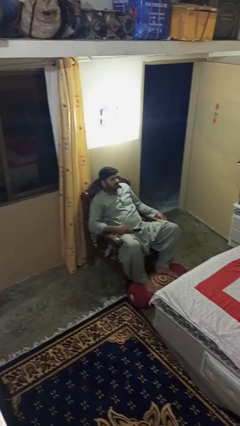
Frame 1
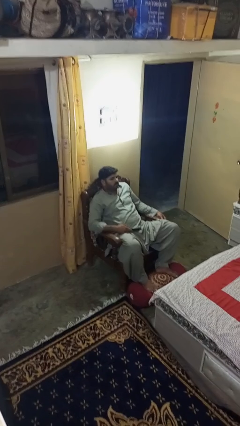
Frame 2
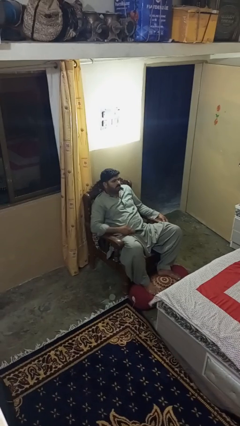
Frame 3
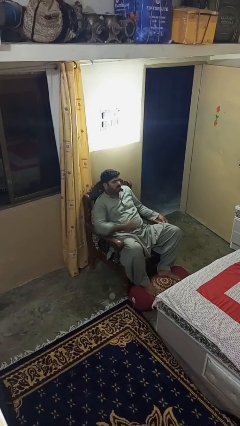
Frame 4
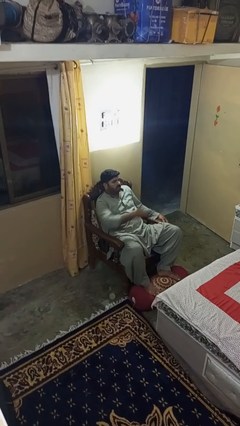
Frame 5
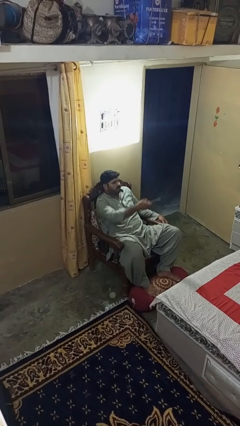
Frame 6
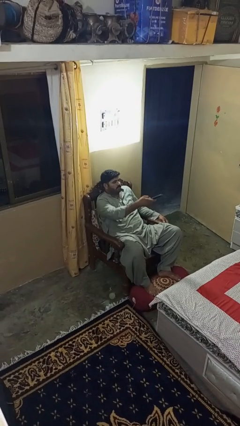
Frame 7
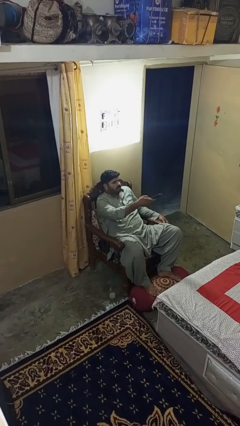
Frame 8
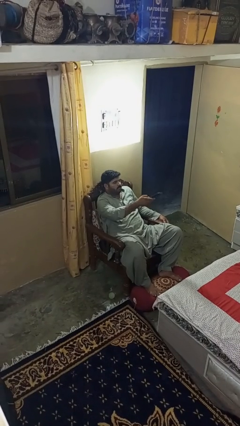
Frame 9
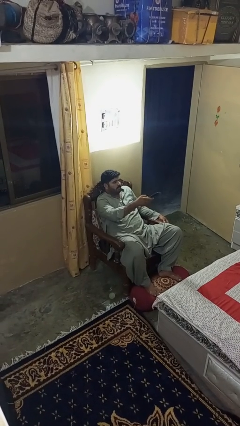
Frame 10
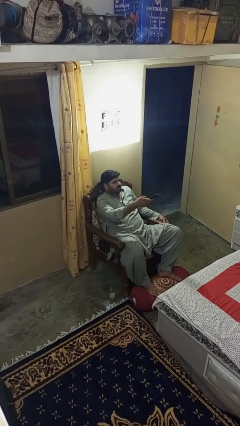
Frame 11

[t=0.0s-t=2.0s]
person uses television remote

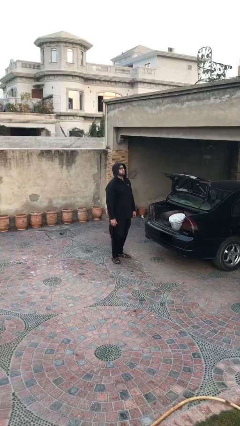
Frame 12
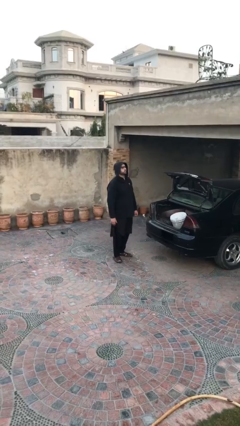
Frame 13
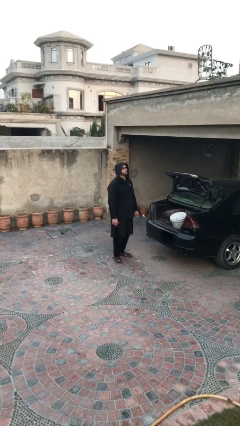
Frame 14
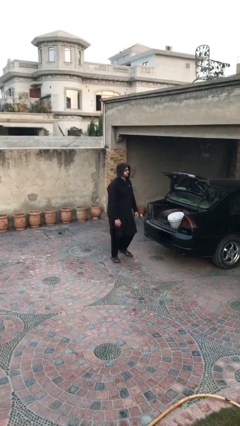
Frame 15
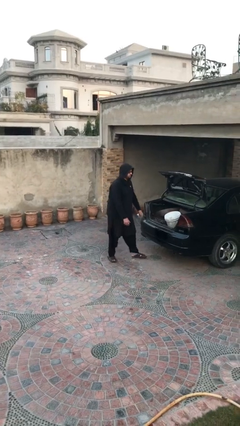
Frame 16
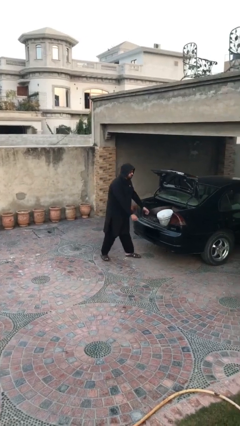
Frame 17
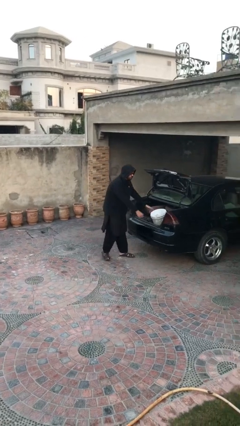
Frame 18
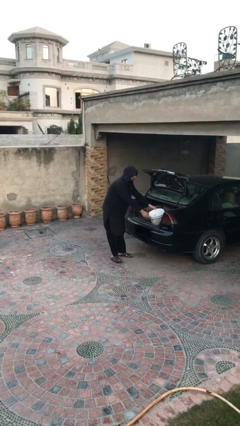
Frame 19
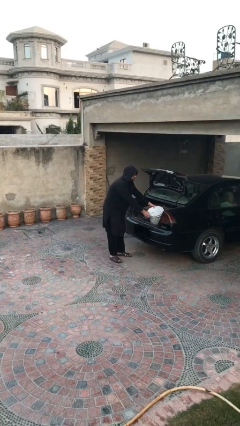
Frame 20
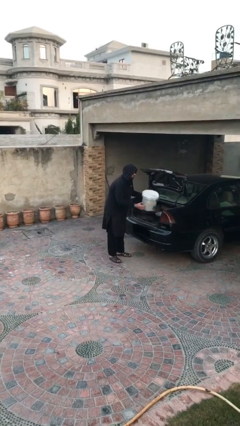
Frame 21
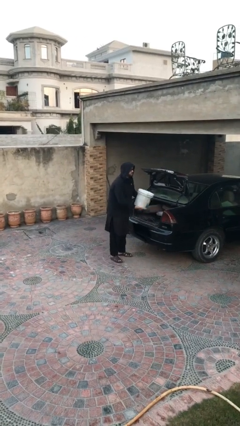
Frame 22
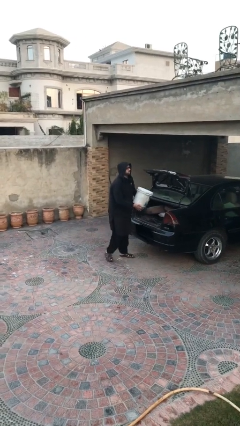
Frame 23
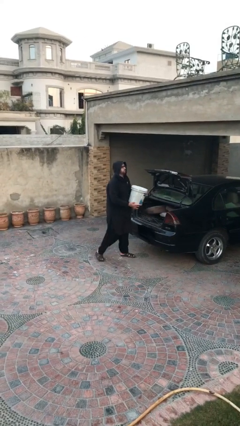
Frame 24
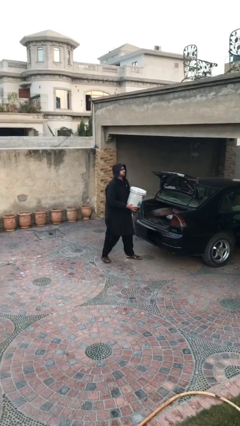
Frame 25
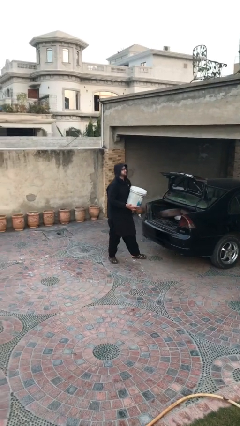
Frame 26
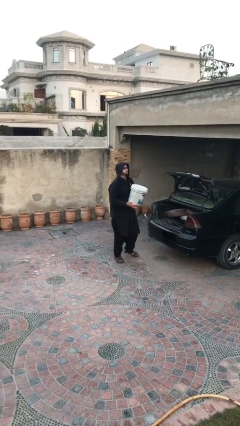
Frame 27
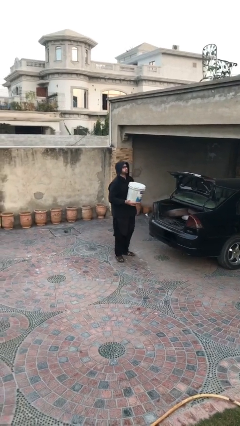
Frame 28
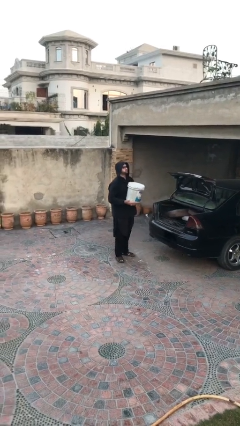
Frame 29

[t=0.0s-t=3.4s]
person unloads car

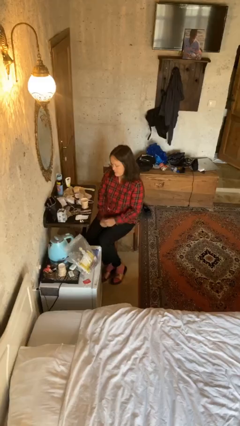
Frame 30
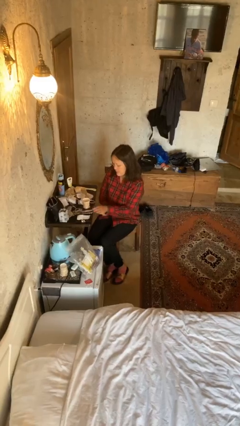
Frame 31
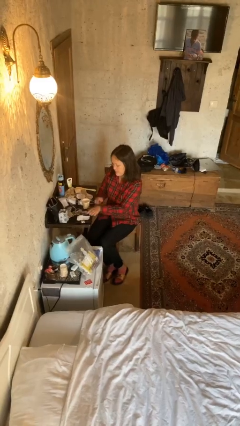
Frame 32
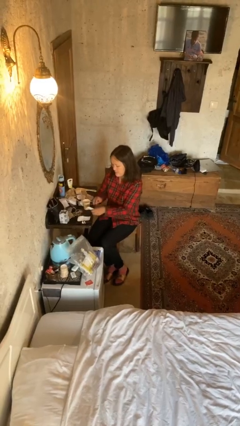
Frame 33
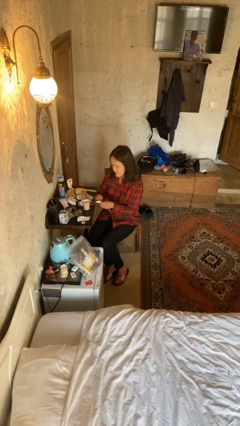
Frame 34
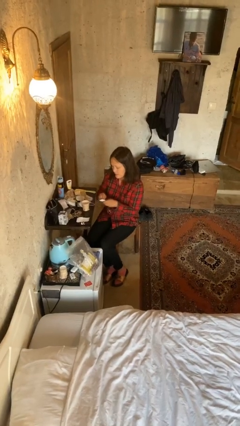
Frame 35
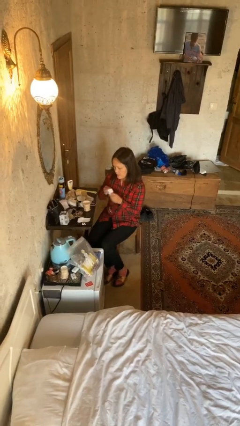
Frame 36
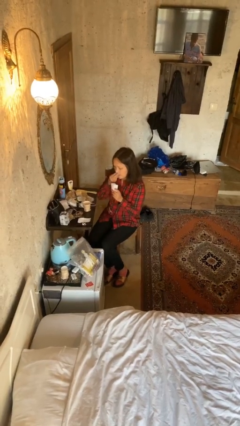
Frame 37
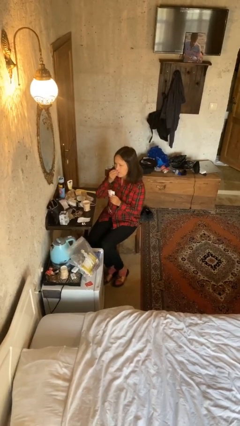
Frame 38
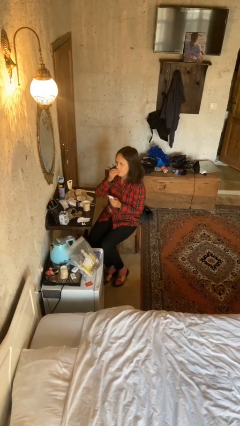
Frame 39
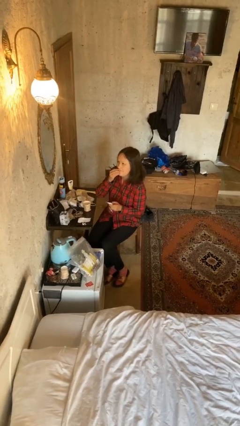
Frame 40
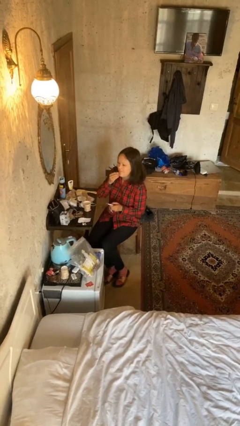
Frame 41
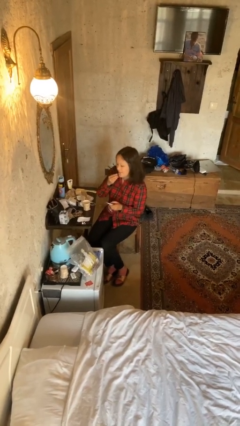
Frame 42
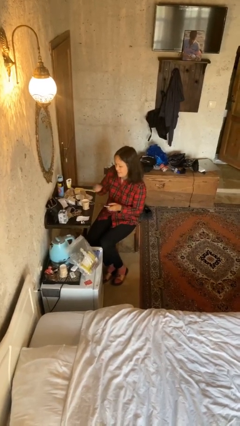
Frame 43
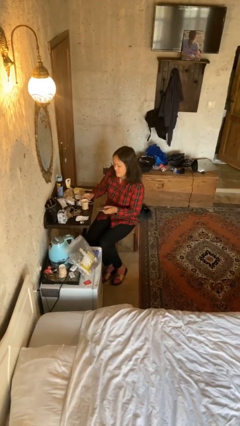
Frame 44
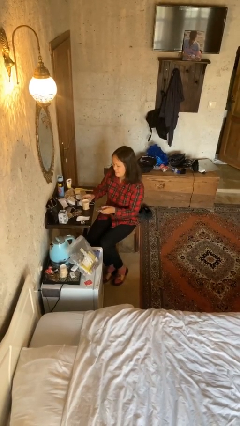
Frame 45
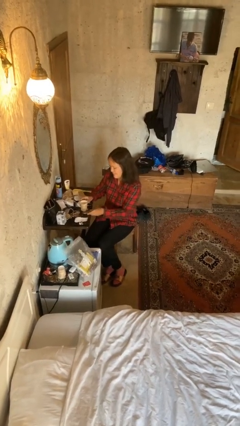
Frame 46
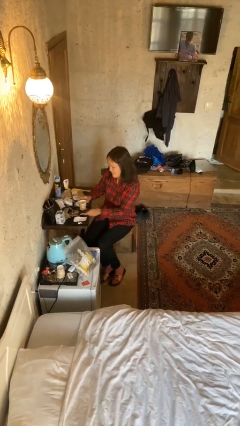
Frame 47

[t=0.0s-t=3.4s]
person takes medicine pills

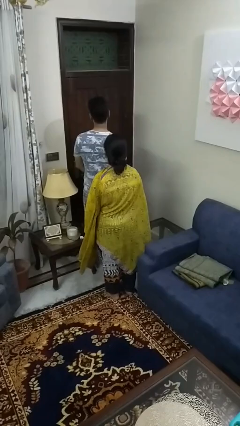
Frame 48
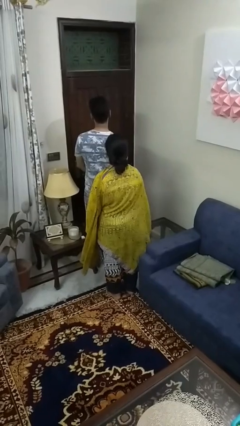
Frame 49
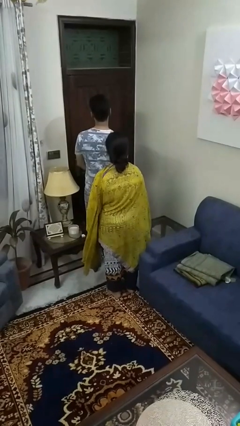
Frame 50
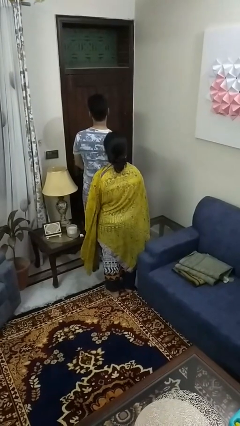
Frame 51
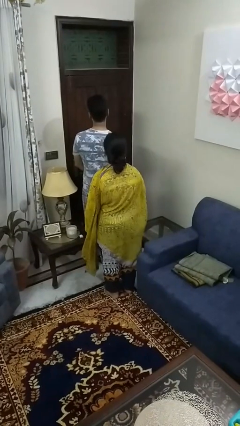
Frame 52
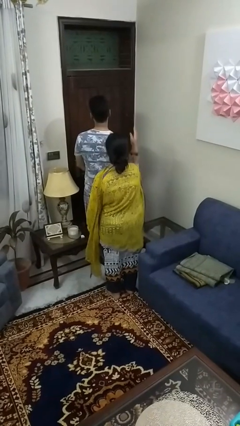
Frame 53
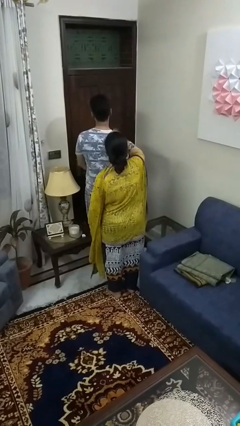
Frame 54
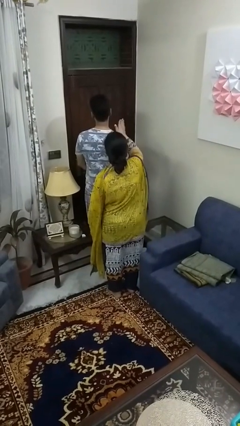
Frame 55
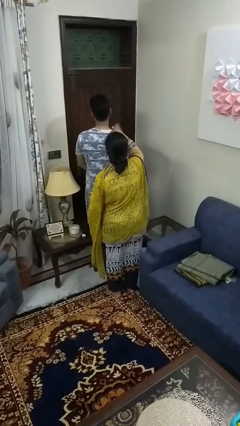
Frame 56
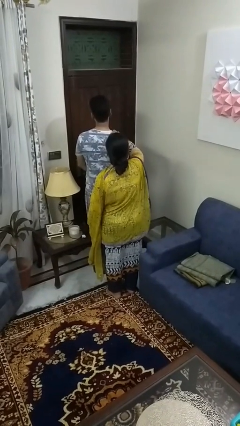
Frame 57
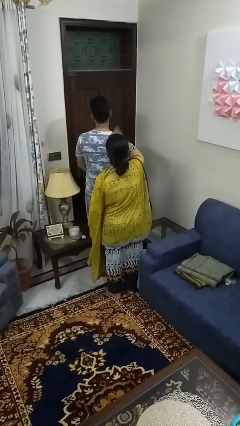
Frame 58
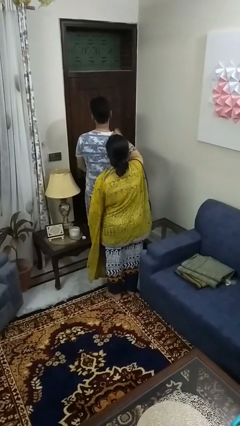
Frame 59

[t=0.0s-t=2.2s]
person pounds shoulders of person

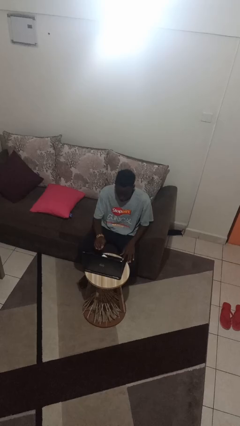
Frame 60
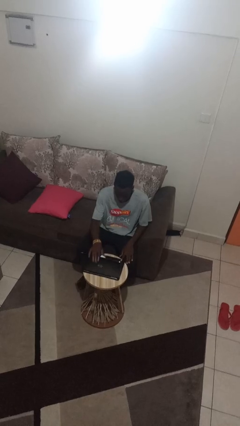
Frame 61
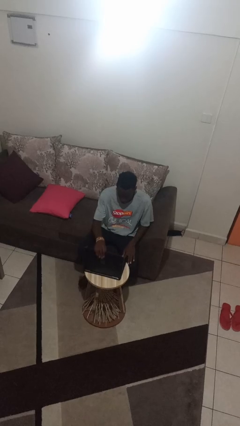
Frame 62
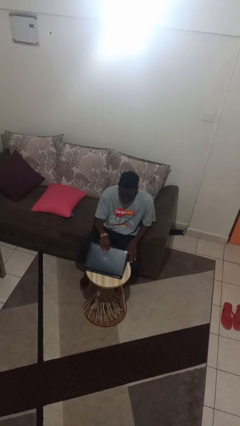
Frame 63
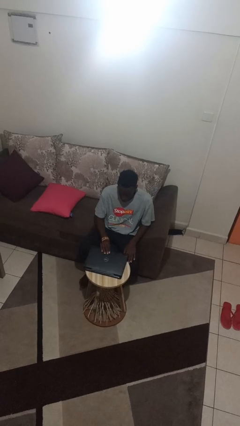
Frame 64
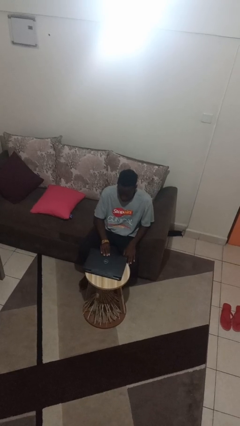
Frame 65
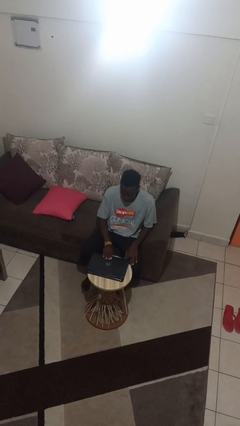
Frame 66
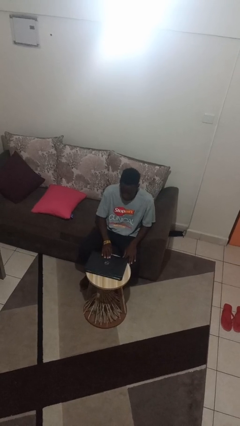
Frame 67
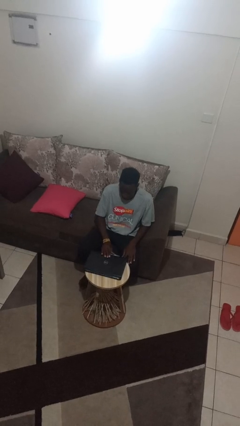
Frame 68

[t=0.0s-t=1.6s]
person closes laptop

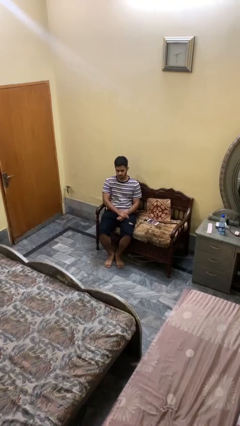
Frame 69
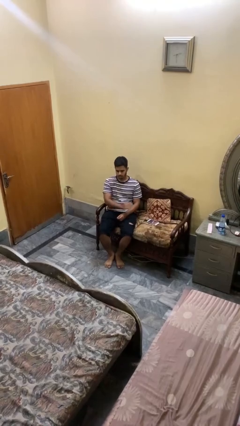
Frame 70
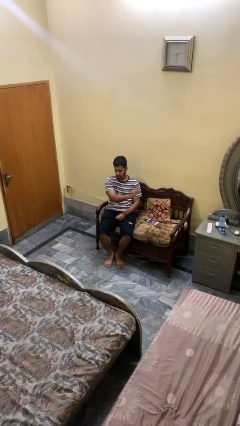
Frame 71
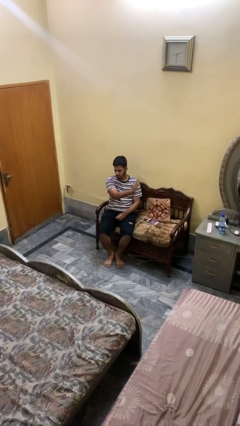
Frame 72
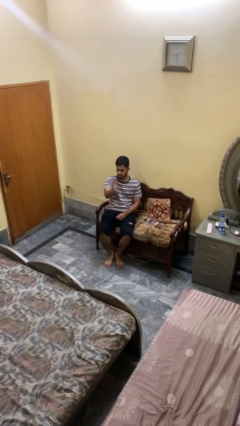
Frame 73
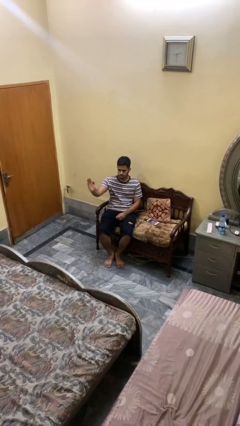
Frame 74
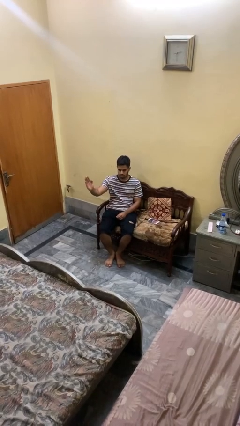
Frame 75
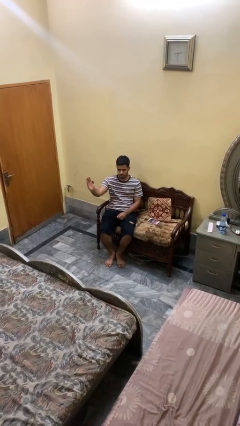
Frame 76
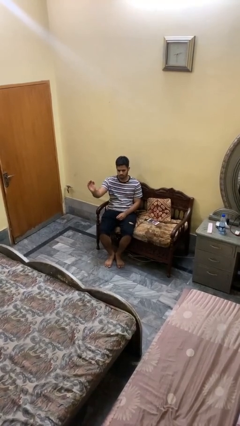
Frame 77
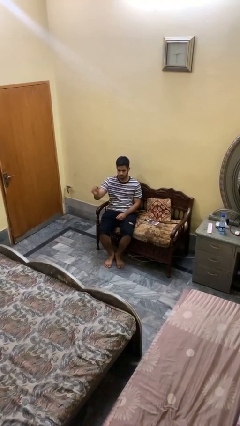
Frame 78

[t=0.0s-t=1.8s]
person gestures swipe right

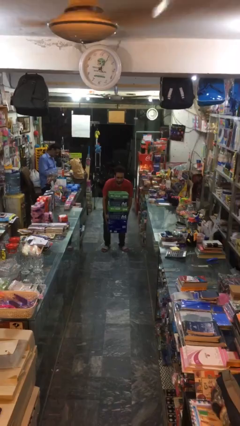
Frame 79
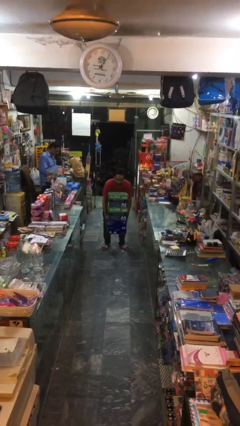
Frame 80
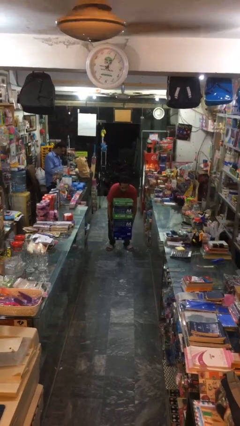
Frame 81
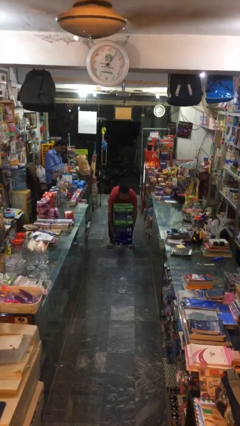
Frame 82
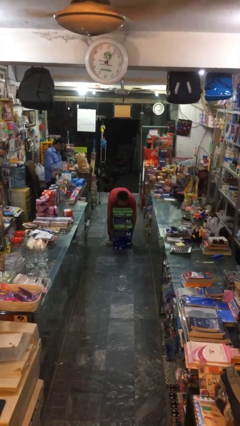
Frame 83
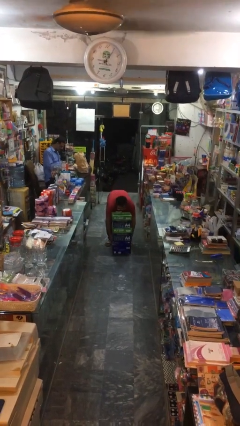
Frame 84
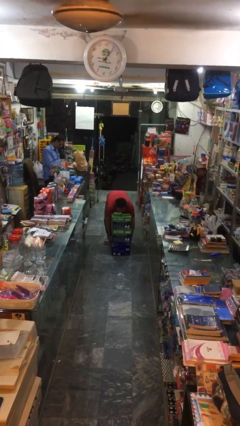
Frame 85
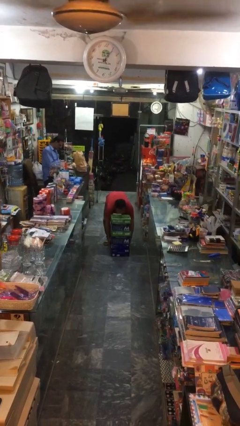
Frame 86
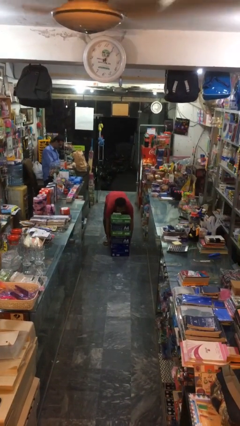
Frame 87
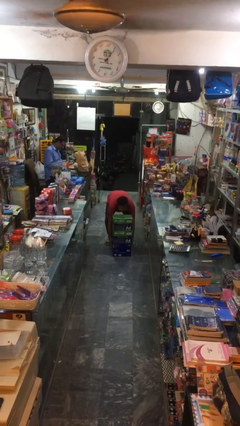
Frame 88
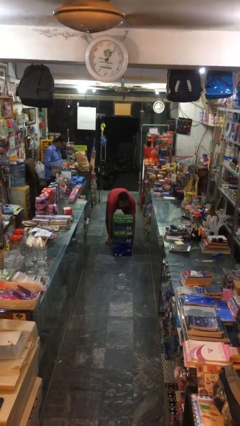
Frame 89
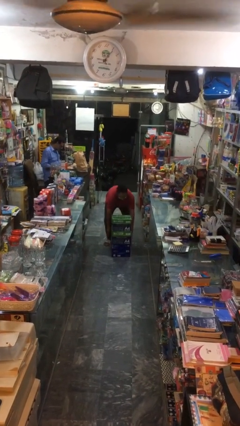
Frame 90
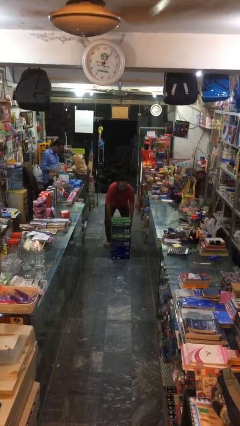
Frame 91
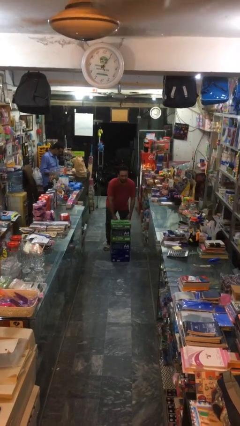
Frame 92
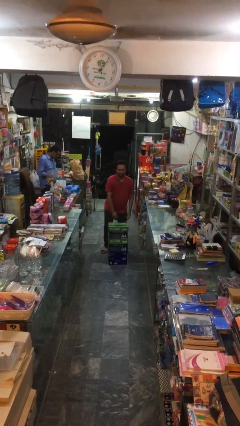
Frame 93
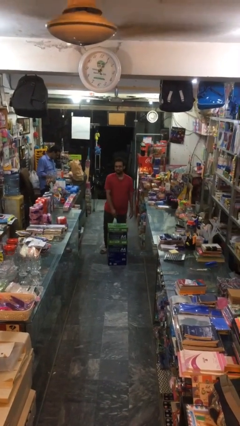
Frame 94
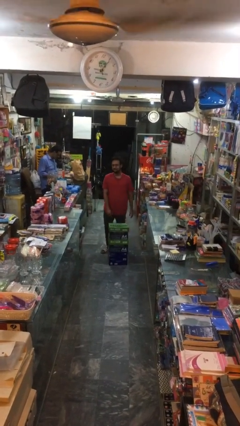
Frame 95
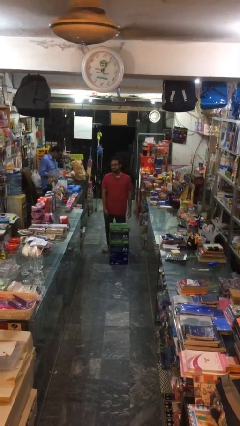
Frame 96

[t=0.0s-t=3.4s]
person puts down object on floor
